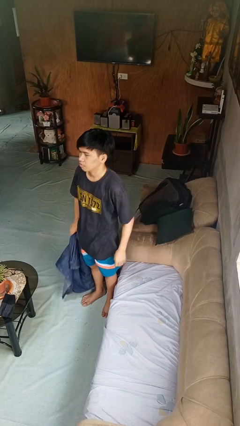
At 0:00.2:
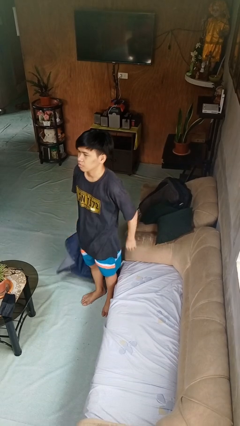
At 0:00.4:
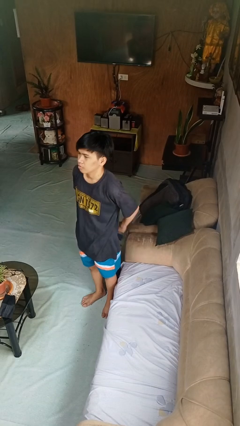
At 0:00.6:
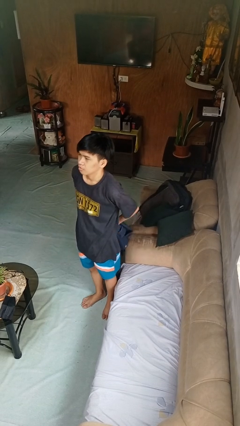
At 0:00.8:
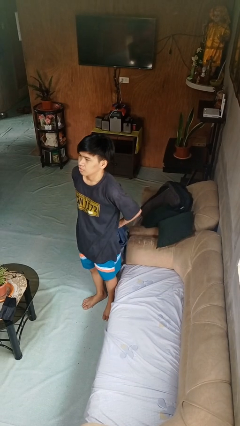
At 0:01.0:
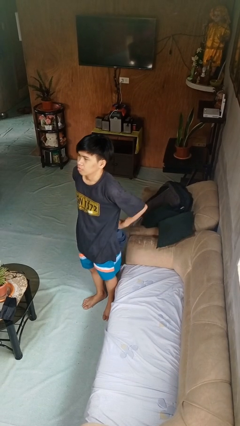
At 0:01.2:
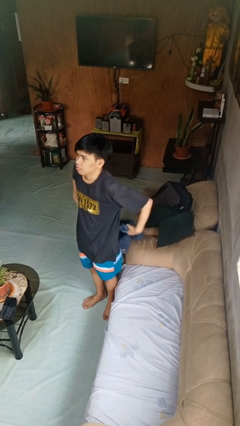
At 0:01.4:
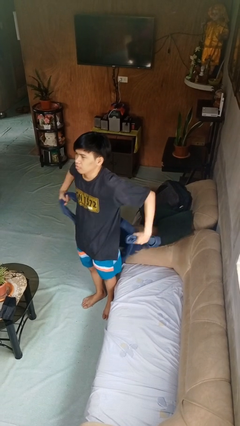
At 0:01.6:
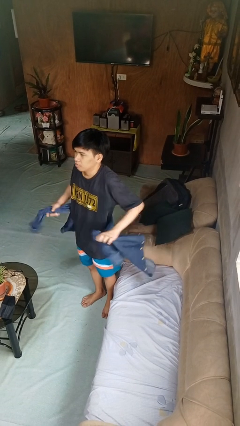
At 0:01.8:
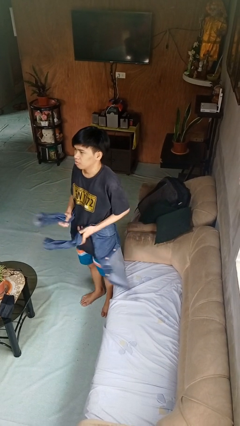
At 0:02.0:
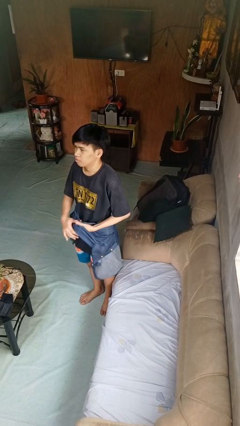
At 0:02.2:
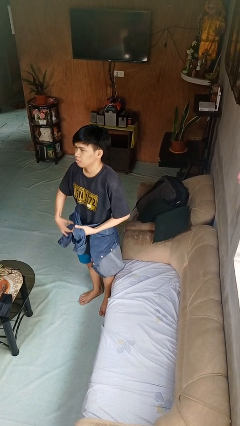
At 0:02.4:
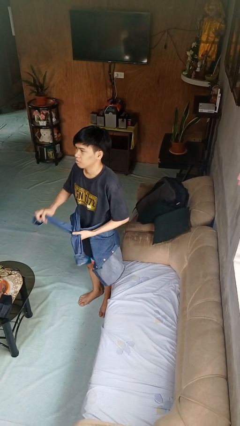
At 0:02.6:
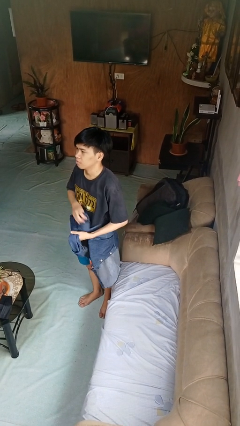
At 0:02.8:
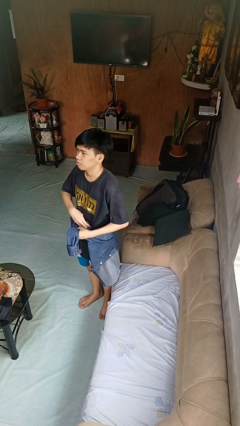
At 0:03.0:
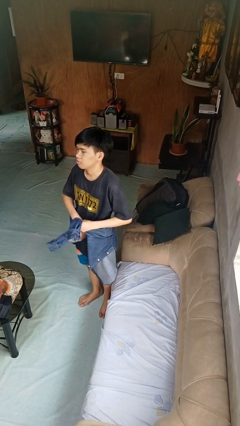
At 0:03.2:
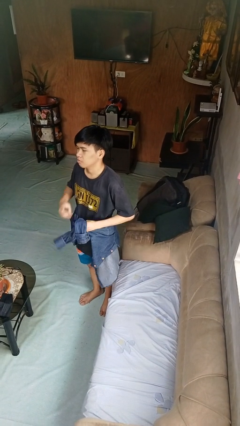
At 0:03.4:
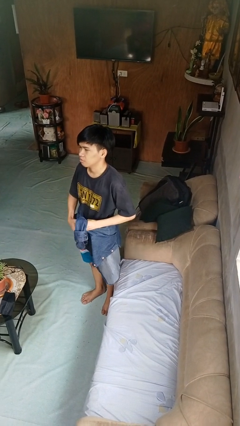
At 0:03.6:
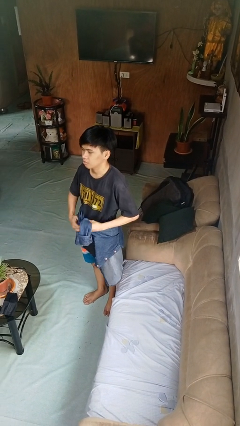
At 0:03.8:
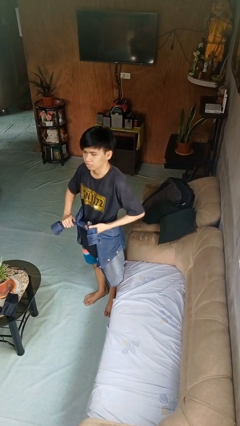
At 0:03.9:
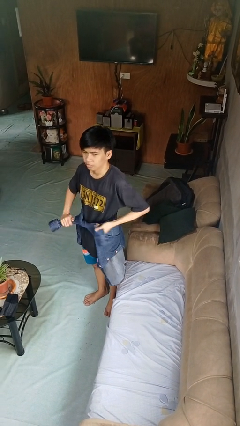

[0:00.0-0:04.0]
person ties jacket around waist

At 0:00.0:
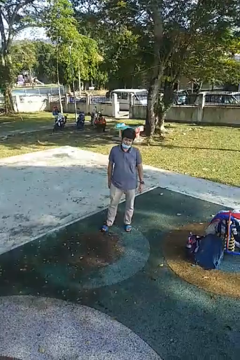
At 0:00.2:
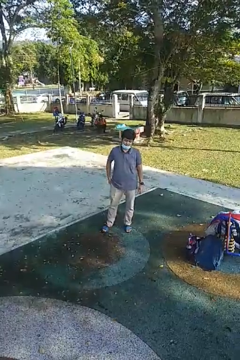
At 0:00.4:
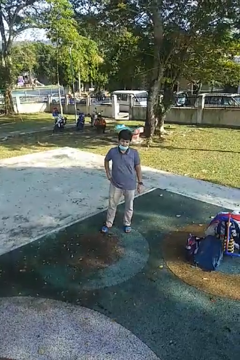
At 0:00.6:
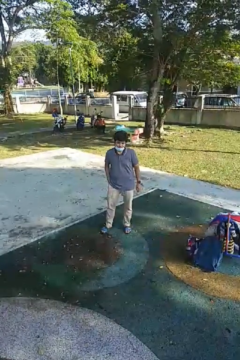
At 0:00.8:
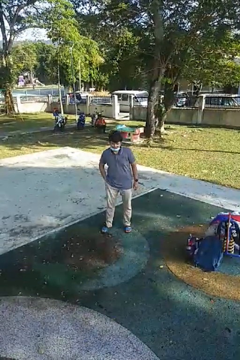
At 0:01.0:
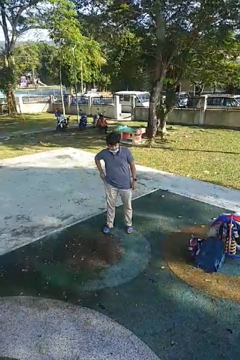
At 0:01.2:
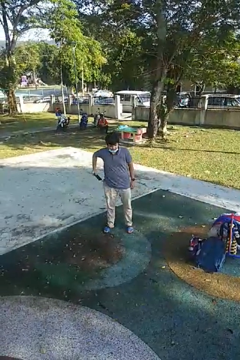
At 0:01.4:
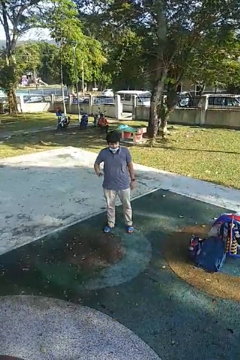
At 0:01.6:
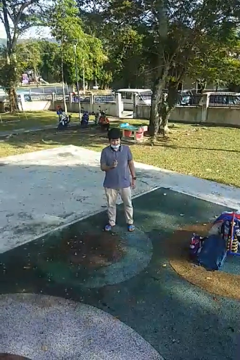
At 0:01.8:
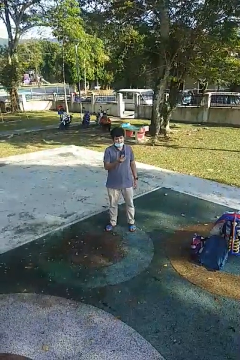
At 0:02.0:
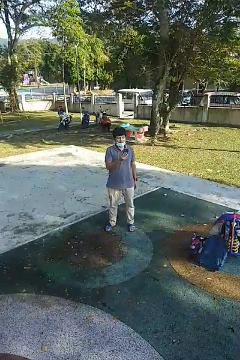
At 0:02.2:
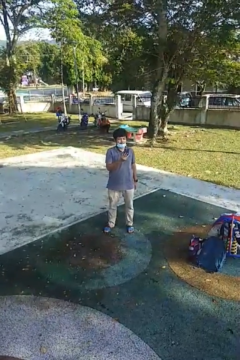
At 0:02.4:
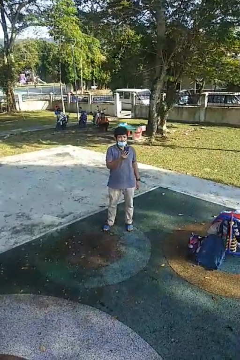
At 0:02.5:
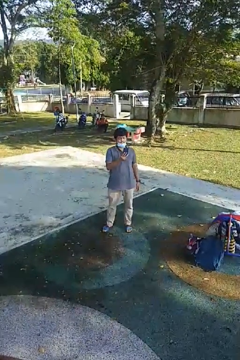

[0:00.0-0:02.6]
person takes phone from pocket

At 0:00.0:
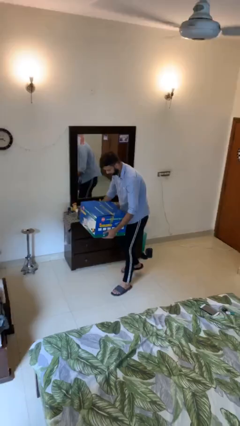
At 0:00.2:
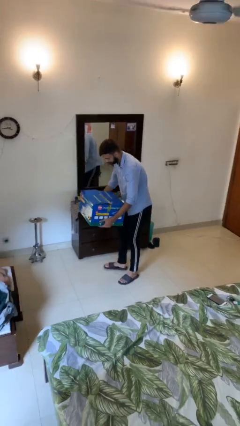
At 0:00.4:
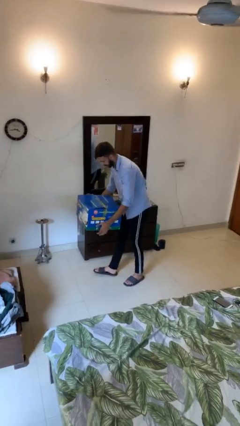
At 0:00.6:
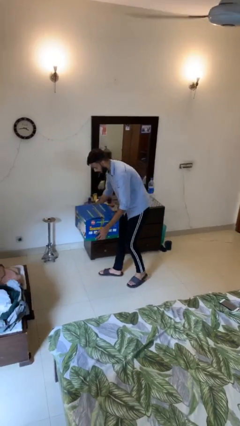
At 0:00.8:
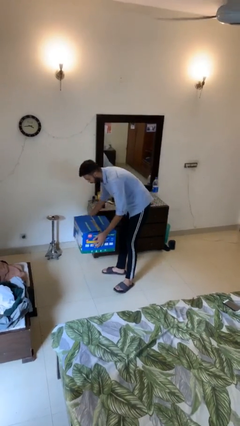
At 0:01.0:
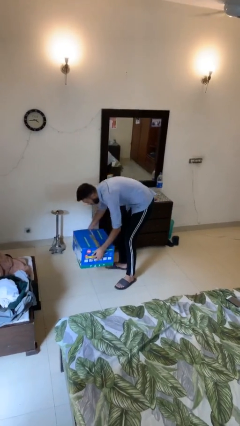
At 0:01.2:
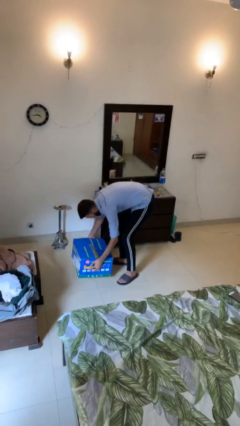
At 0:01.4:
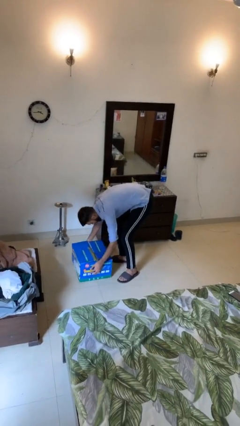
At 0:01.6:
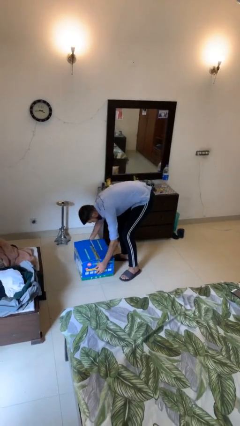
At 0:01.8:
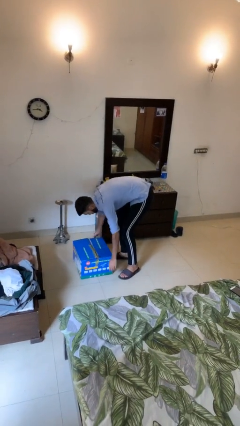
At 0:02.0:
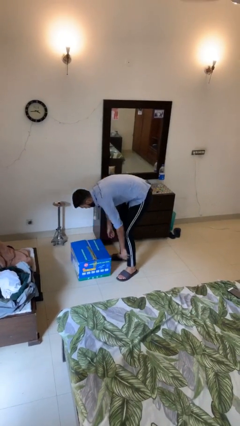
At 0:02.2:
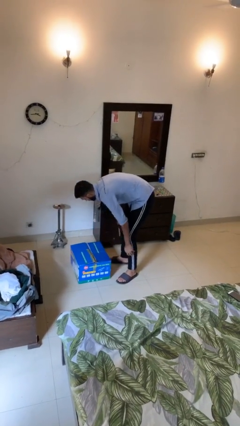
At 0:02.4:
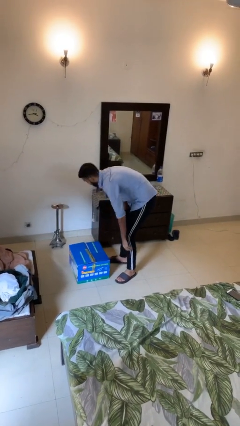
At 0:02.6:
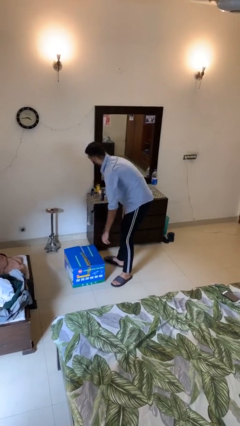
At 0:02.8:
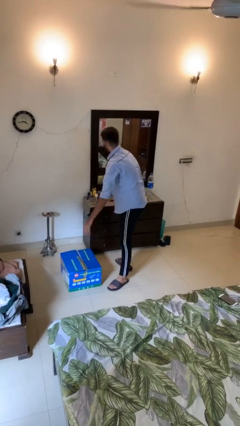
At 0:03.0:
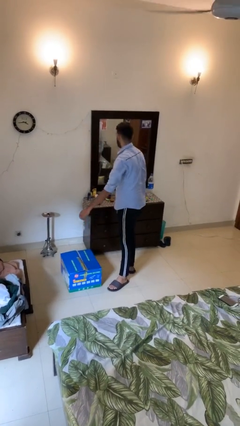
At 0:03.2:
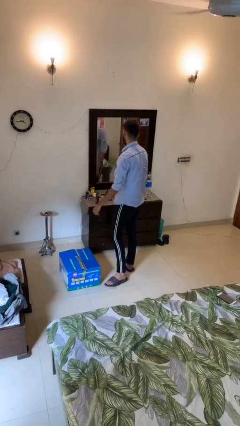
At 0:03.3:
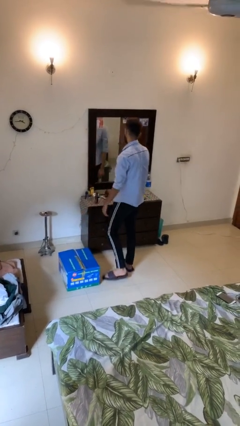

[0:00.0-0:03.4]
person puts down object on floor

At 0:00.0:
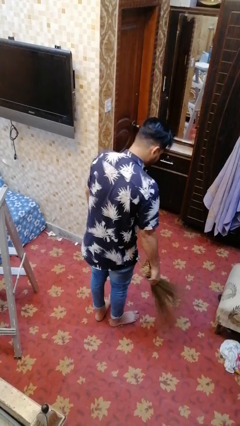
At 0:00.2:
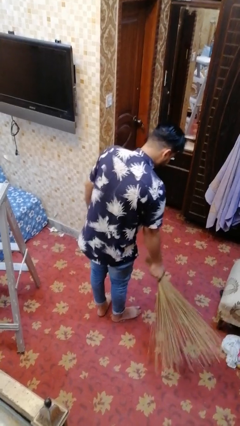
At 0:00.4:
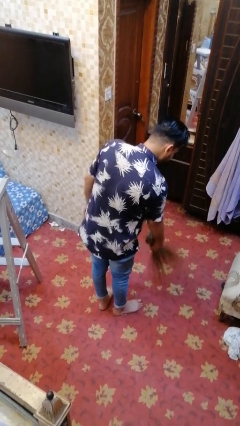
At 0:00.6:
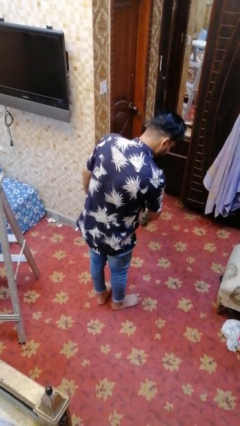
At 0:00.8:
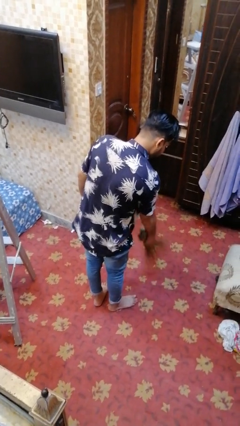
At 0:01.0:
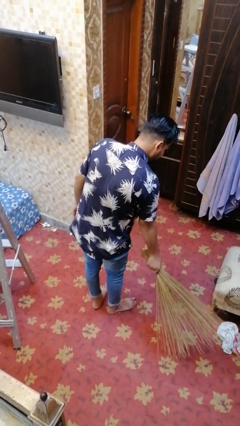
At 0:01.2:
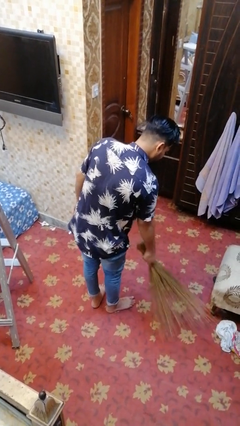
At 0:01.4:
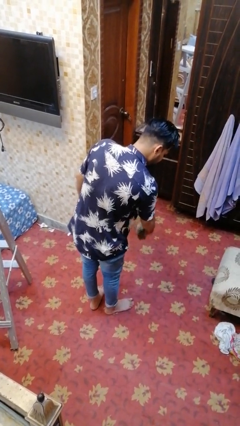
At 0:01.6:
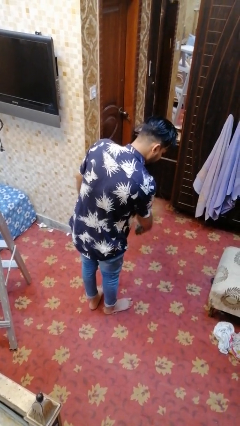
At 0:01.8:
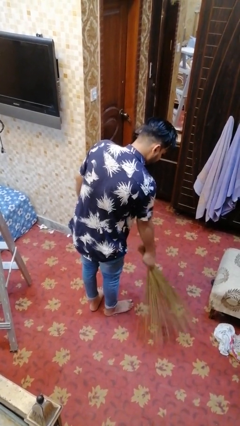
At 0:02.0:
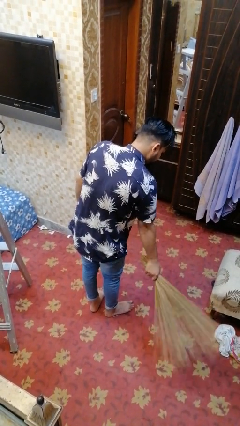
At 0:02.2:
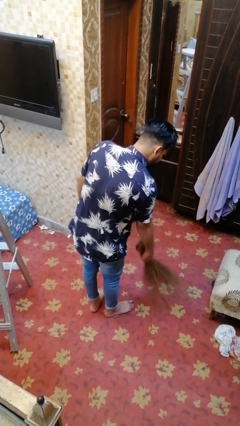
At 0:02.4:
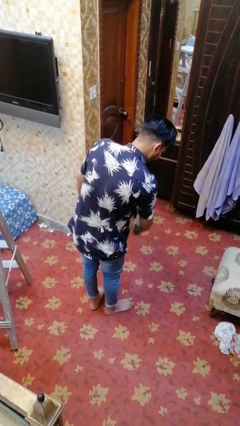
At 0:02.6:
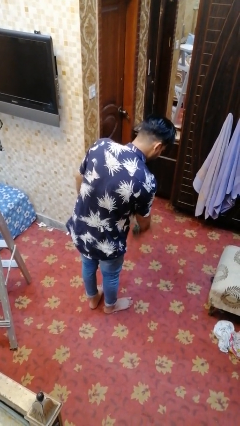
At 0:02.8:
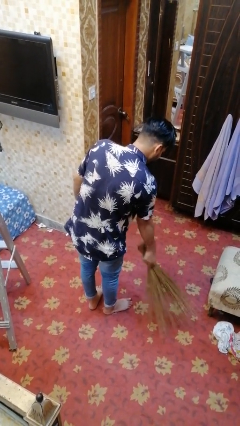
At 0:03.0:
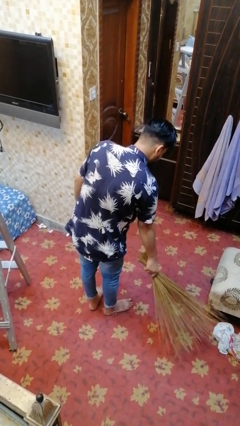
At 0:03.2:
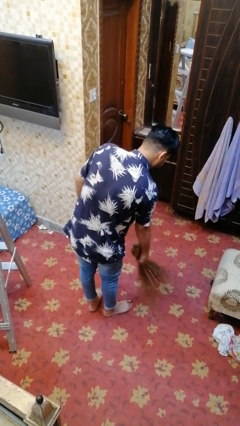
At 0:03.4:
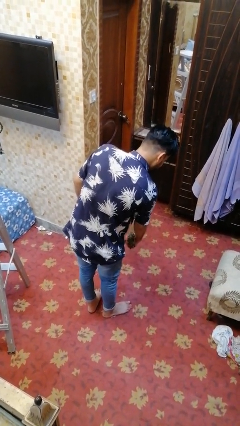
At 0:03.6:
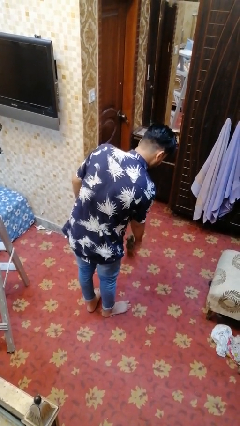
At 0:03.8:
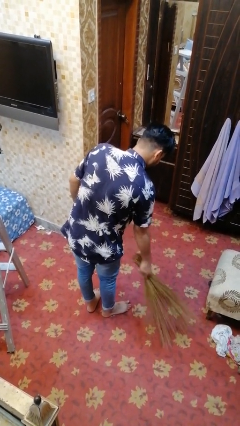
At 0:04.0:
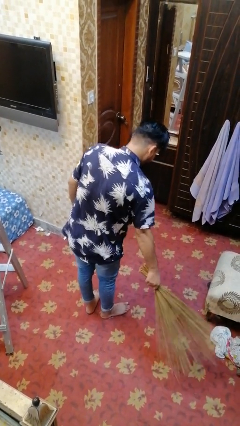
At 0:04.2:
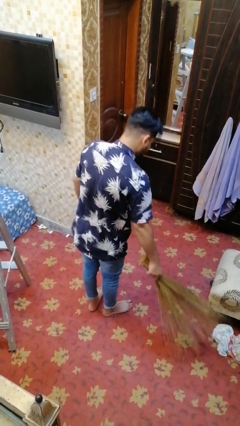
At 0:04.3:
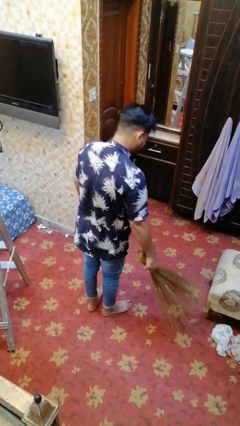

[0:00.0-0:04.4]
person sweeps floor

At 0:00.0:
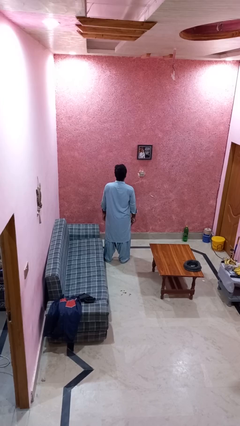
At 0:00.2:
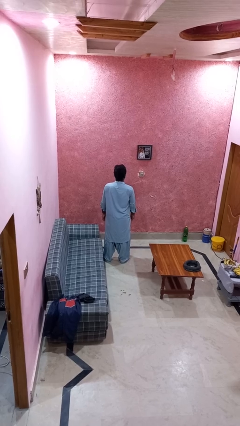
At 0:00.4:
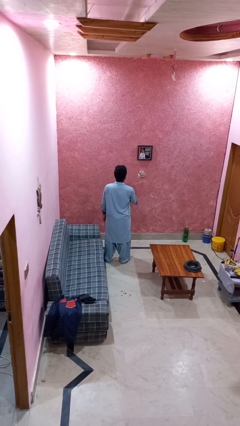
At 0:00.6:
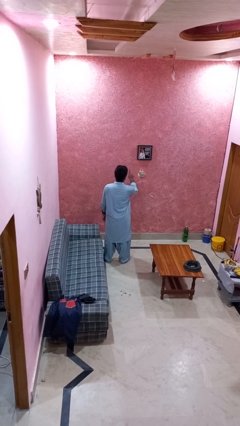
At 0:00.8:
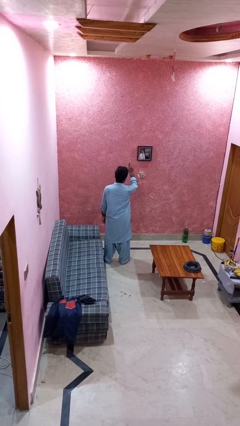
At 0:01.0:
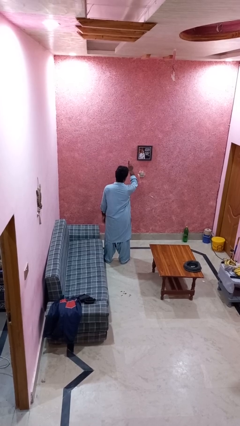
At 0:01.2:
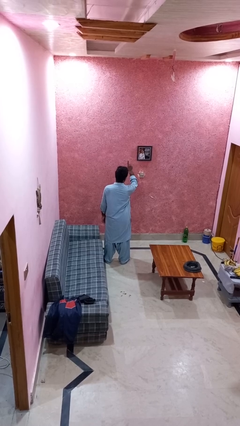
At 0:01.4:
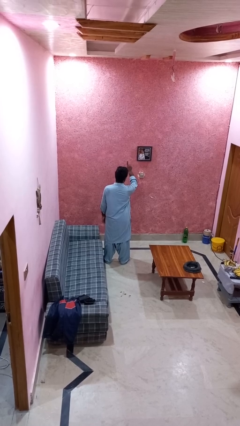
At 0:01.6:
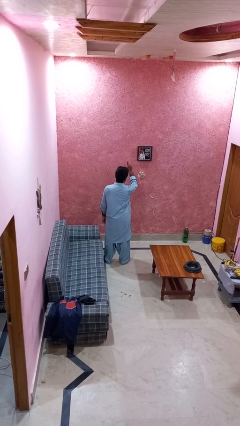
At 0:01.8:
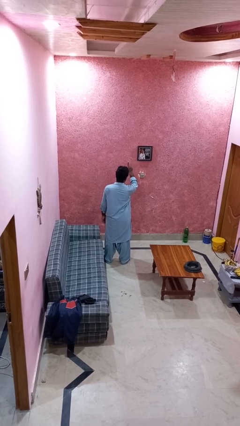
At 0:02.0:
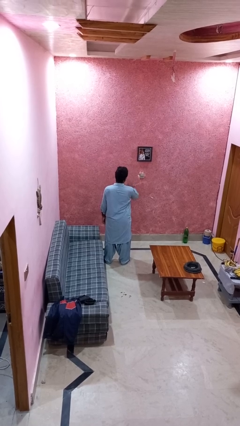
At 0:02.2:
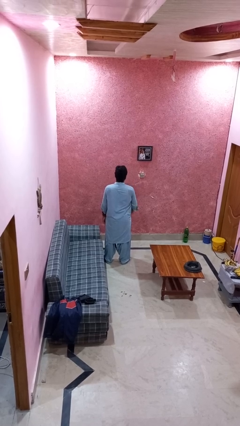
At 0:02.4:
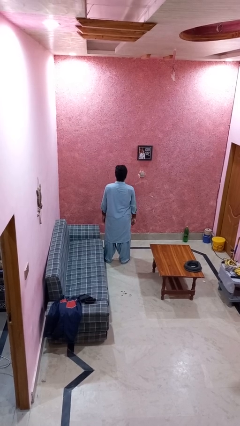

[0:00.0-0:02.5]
person gestures number one

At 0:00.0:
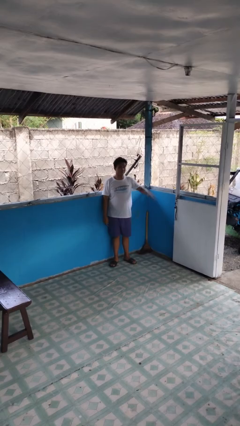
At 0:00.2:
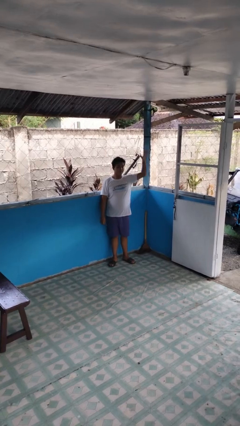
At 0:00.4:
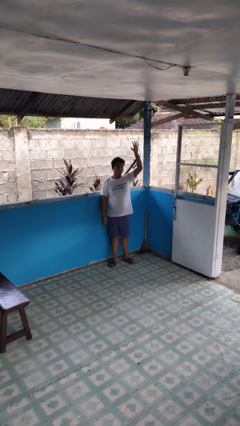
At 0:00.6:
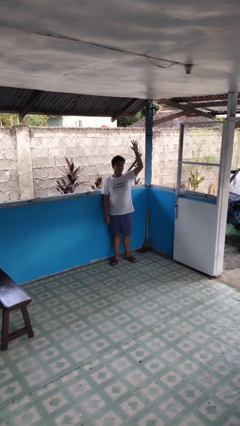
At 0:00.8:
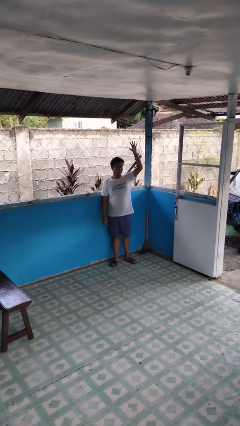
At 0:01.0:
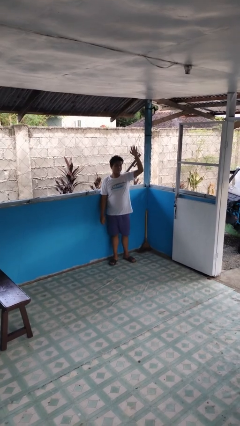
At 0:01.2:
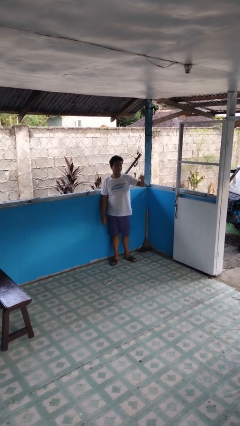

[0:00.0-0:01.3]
person gestures number five
